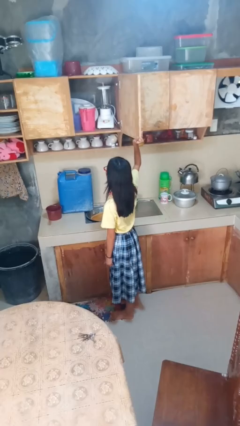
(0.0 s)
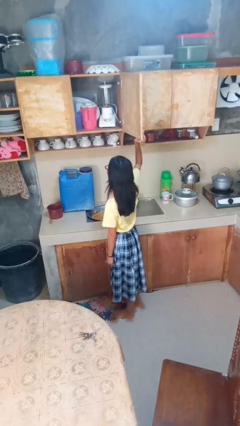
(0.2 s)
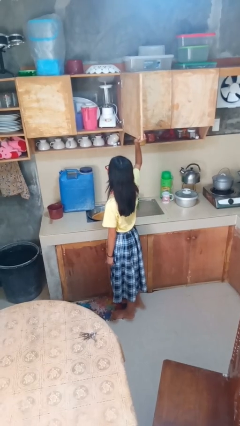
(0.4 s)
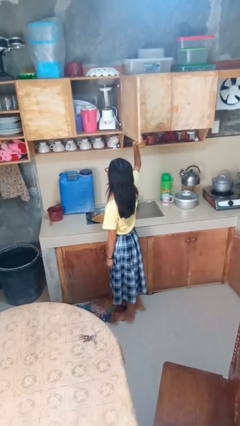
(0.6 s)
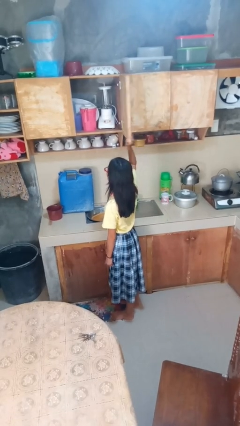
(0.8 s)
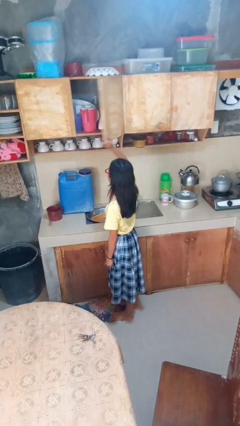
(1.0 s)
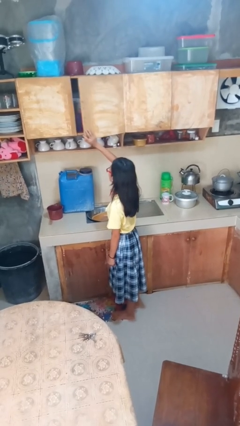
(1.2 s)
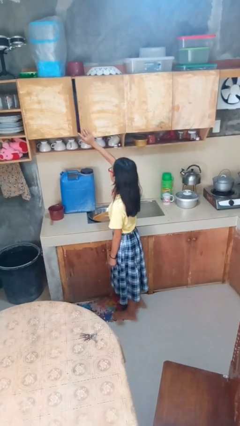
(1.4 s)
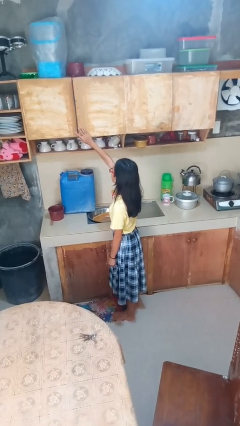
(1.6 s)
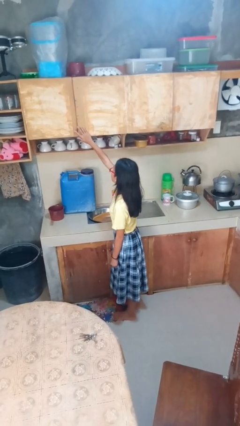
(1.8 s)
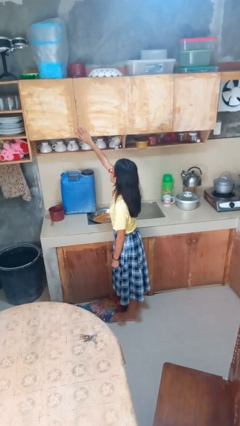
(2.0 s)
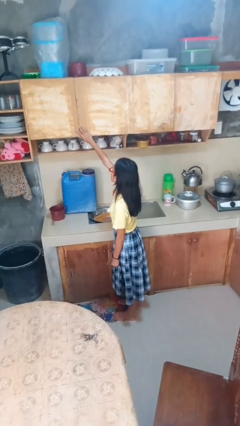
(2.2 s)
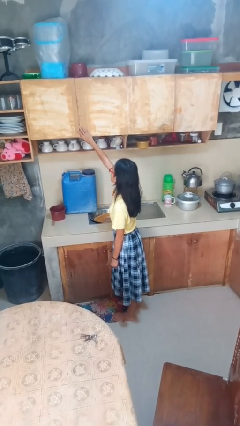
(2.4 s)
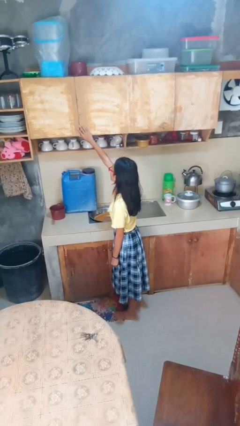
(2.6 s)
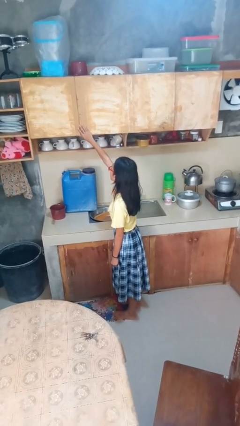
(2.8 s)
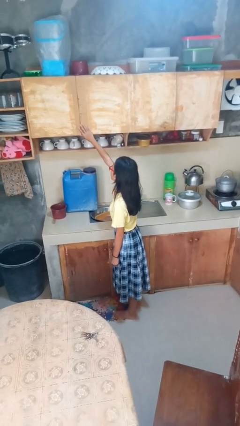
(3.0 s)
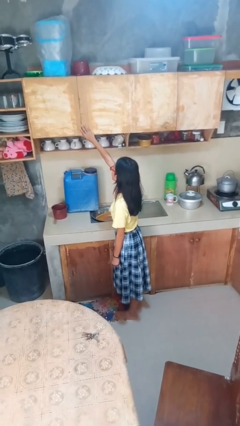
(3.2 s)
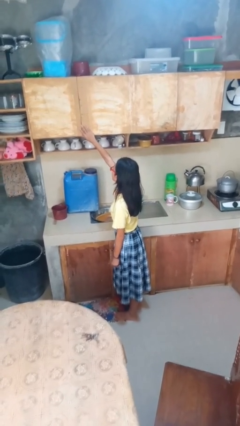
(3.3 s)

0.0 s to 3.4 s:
person closes cabinet

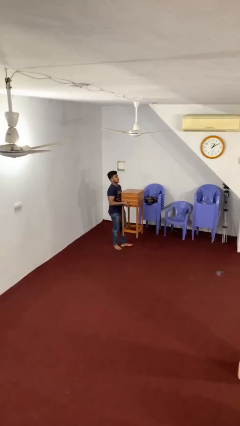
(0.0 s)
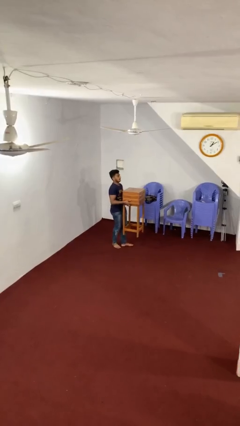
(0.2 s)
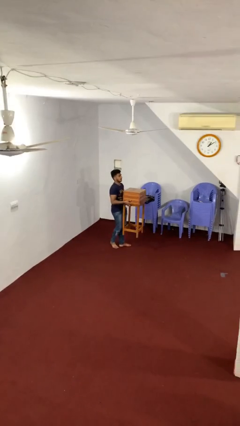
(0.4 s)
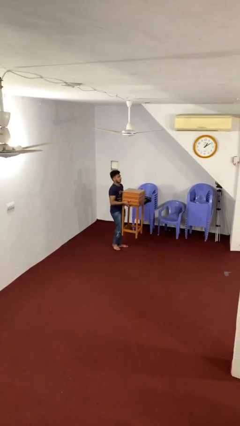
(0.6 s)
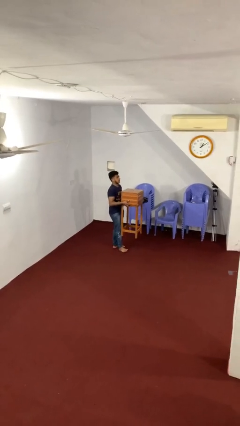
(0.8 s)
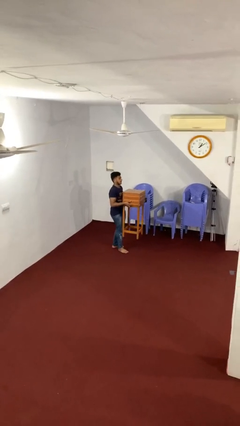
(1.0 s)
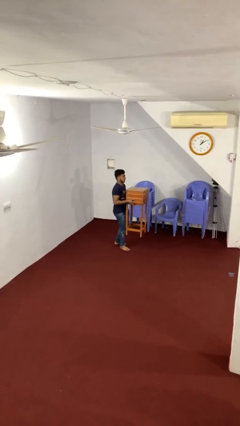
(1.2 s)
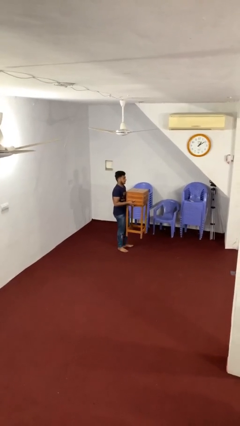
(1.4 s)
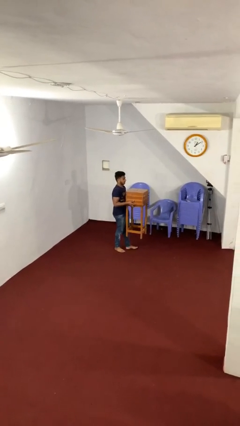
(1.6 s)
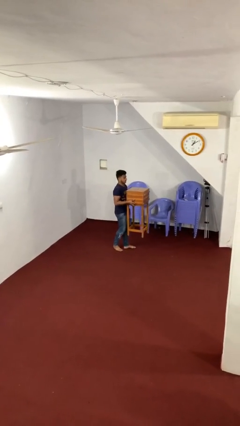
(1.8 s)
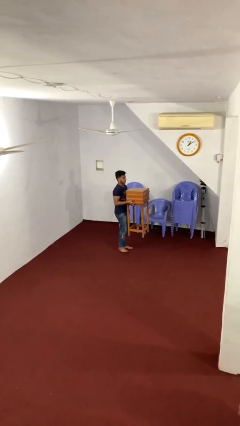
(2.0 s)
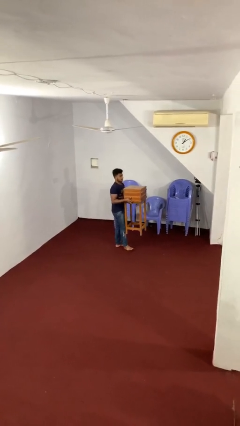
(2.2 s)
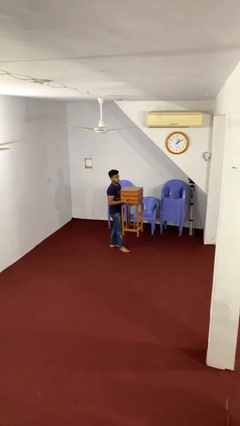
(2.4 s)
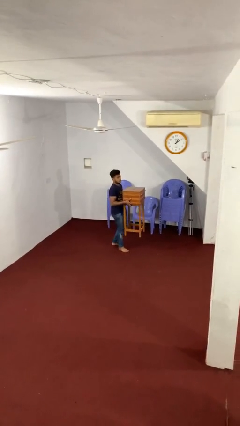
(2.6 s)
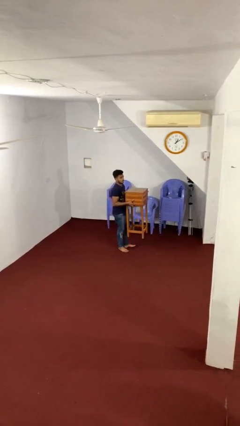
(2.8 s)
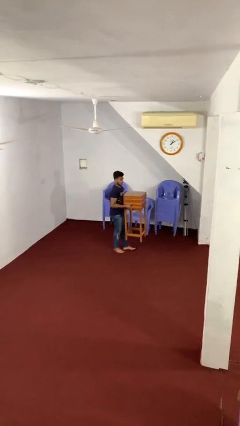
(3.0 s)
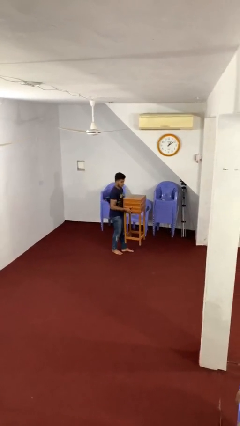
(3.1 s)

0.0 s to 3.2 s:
person carries heavy object

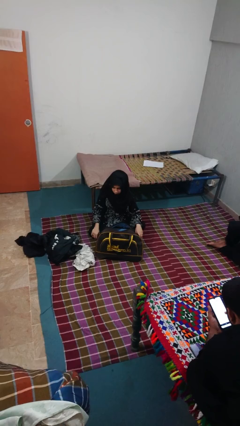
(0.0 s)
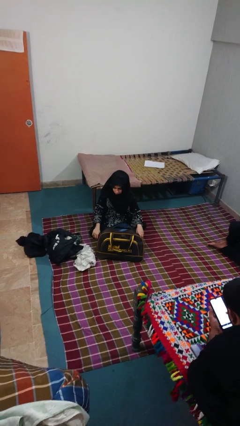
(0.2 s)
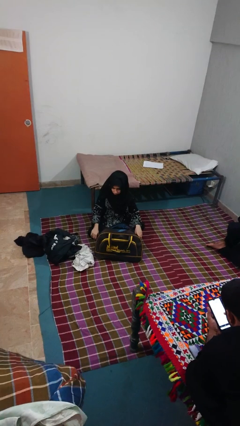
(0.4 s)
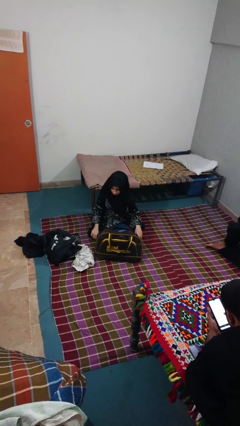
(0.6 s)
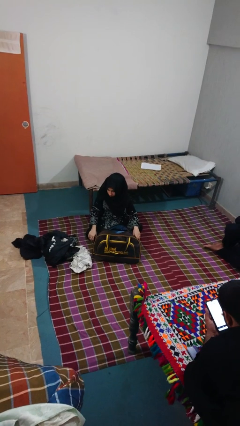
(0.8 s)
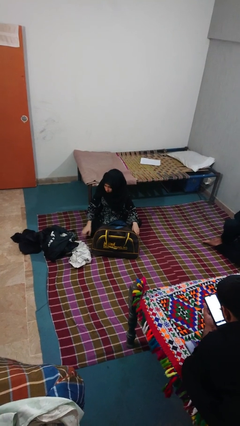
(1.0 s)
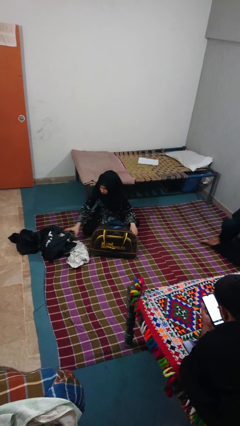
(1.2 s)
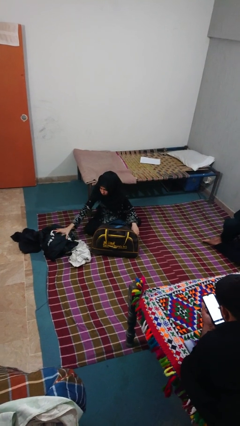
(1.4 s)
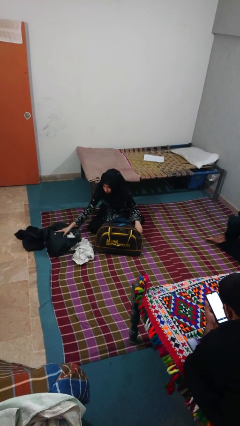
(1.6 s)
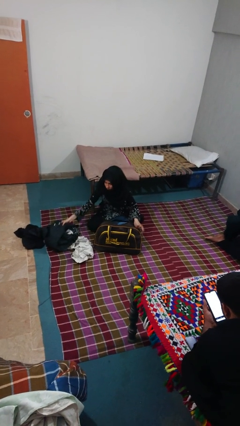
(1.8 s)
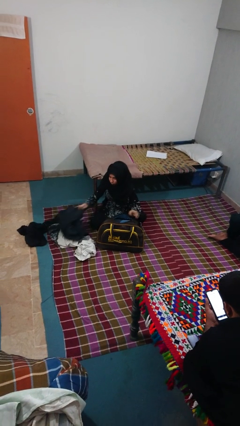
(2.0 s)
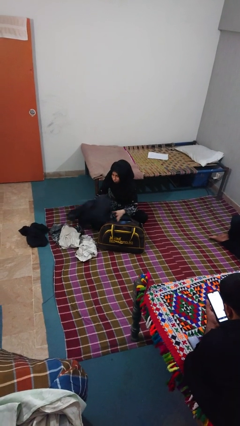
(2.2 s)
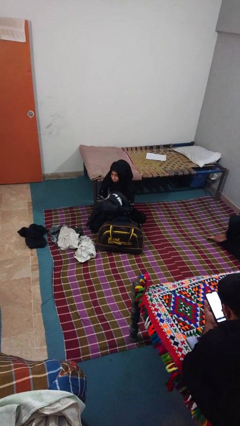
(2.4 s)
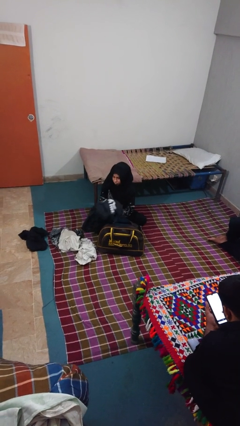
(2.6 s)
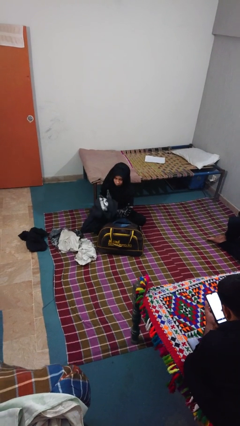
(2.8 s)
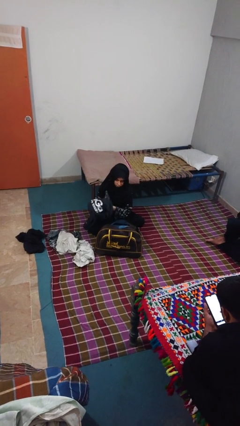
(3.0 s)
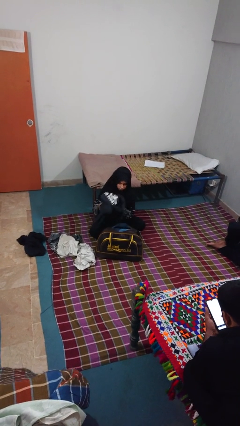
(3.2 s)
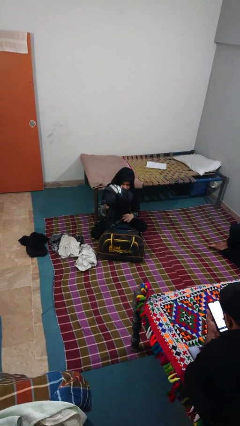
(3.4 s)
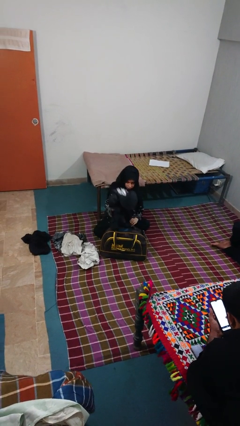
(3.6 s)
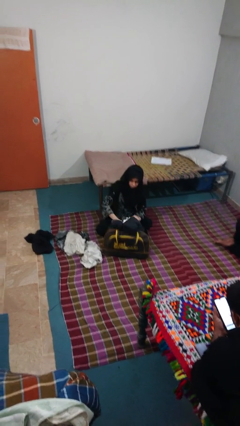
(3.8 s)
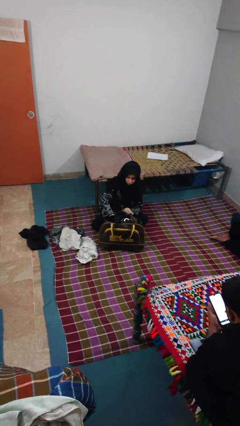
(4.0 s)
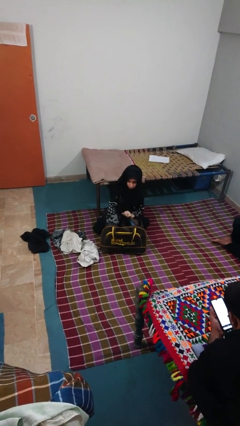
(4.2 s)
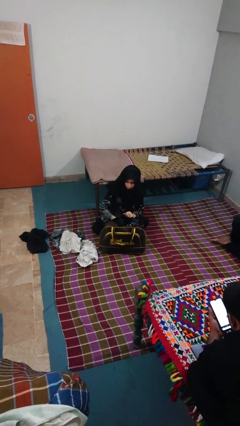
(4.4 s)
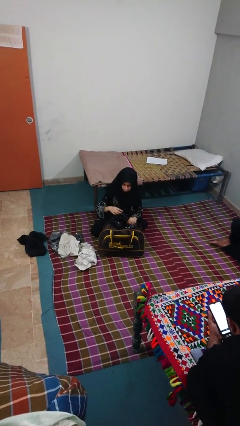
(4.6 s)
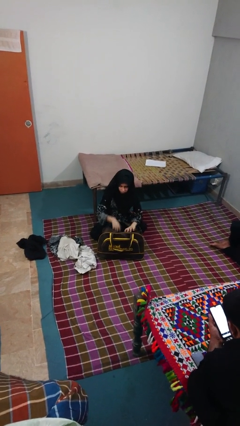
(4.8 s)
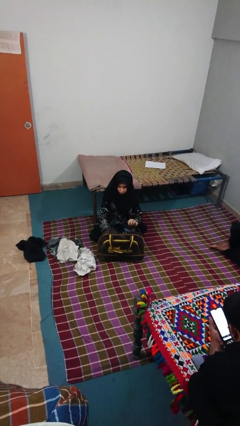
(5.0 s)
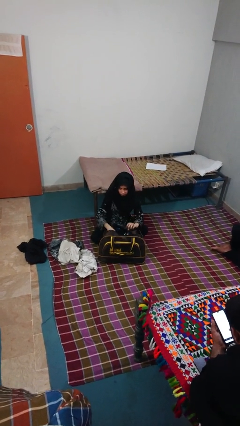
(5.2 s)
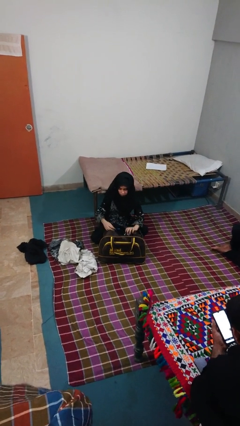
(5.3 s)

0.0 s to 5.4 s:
person loads clothes into suitcase

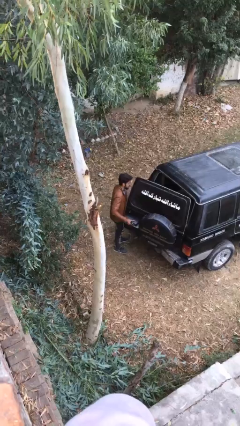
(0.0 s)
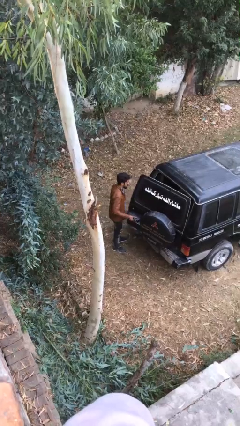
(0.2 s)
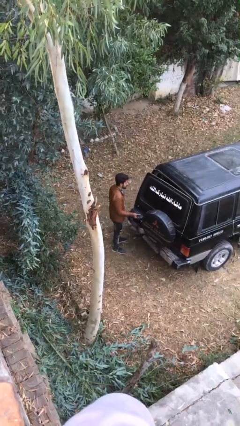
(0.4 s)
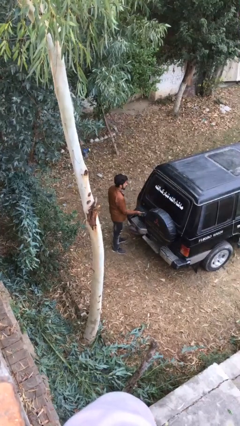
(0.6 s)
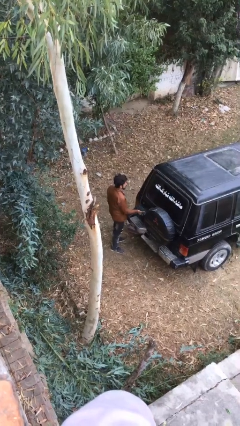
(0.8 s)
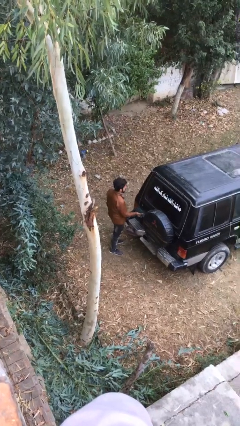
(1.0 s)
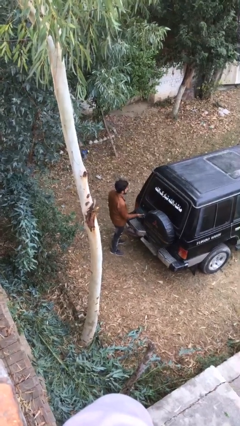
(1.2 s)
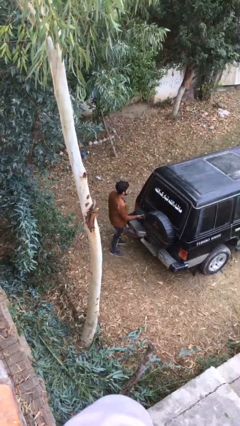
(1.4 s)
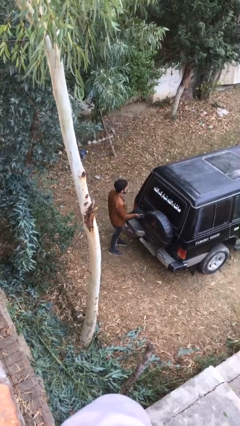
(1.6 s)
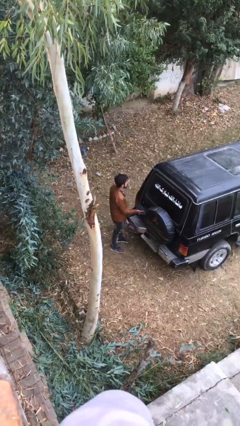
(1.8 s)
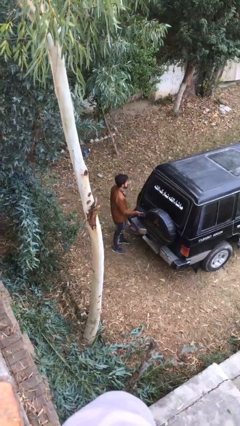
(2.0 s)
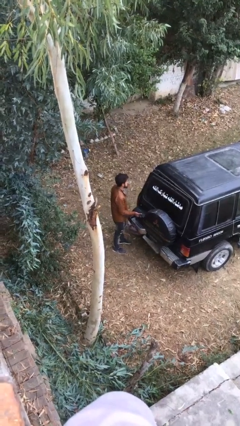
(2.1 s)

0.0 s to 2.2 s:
person closes car trunk

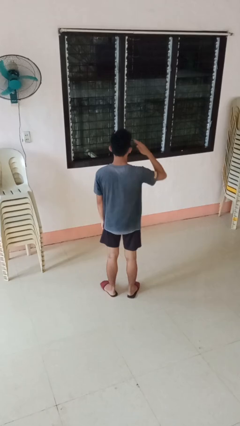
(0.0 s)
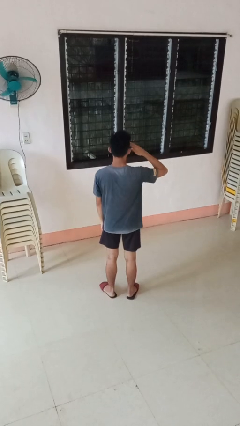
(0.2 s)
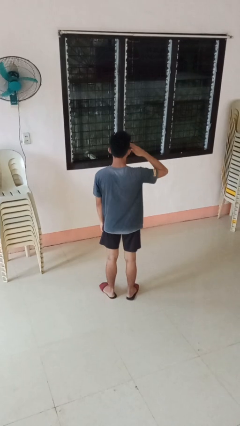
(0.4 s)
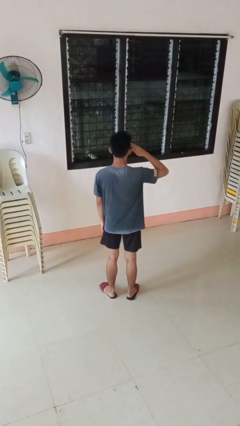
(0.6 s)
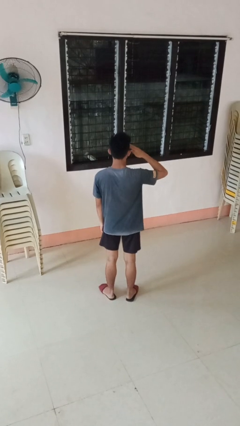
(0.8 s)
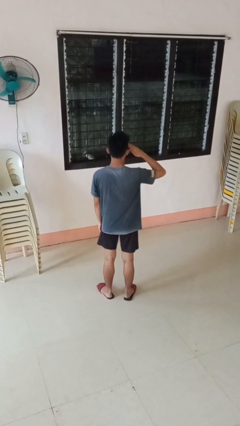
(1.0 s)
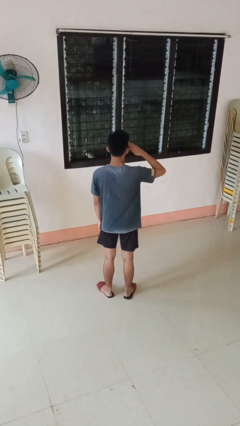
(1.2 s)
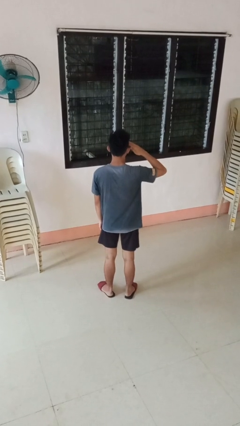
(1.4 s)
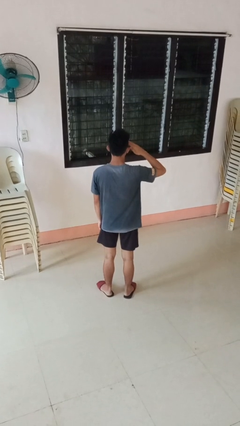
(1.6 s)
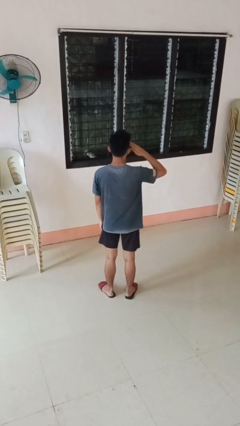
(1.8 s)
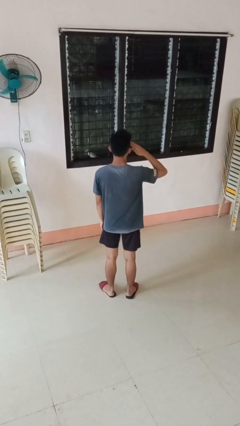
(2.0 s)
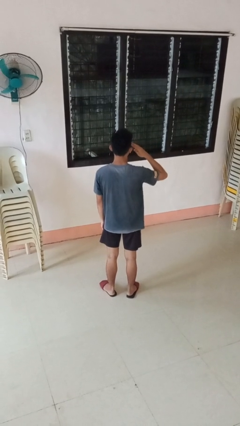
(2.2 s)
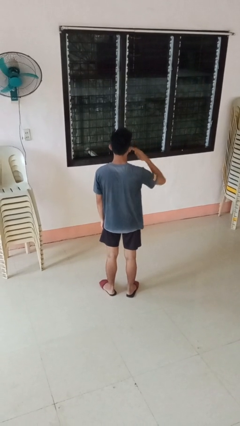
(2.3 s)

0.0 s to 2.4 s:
person salutes

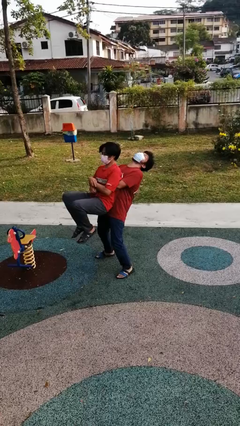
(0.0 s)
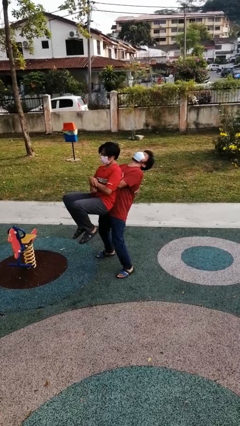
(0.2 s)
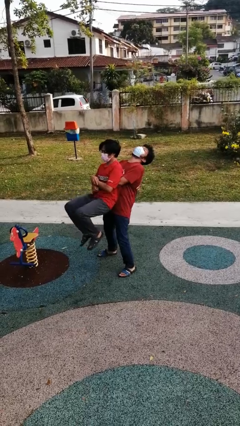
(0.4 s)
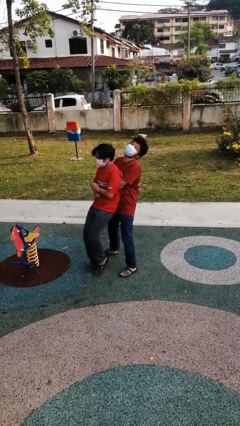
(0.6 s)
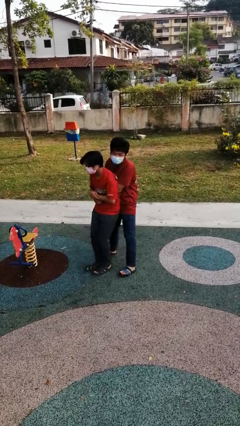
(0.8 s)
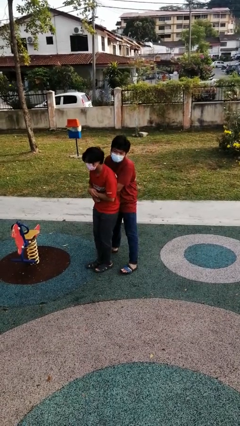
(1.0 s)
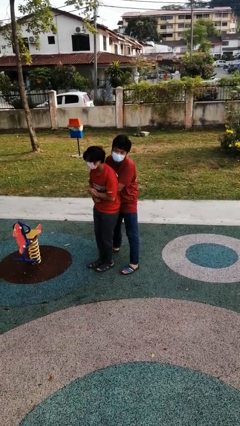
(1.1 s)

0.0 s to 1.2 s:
person puts down person
